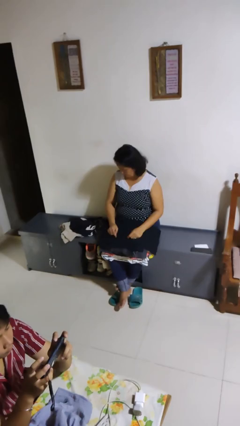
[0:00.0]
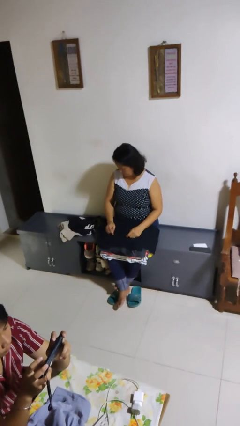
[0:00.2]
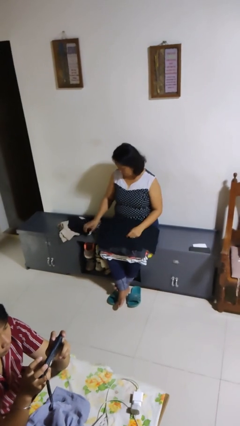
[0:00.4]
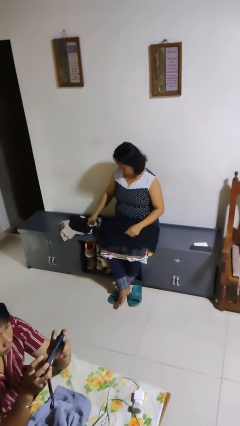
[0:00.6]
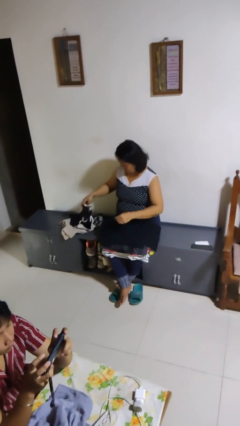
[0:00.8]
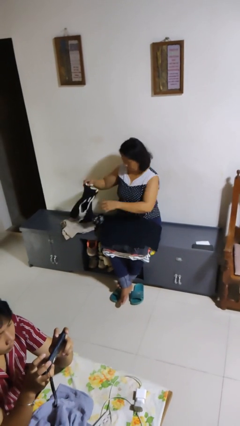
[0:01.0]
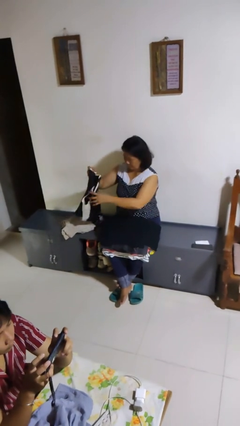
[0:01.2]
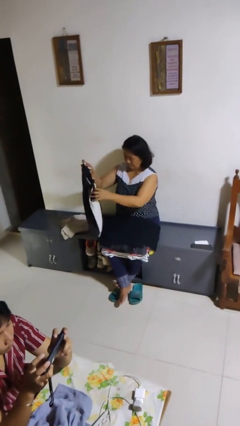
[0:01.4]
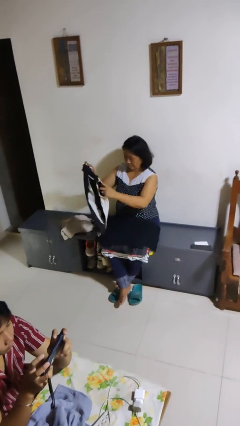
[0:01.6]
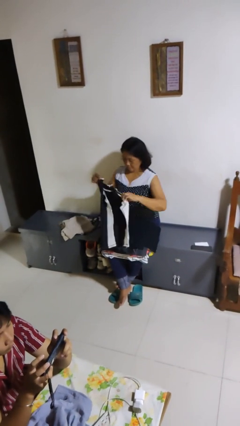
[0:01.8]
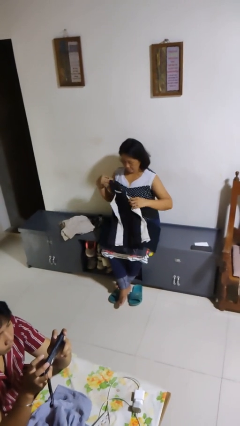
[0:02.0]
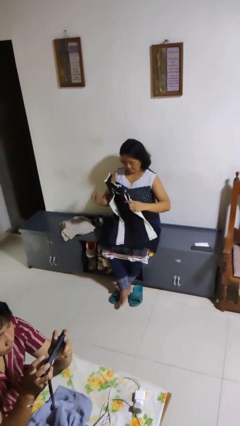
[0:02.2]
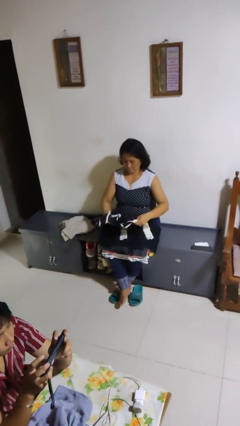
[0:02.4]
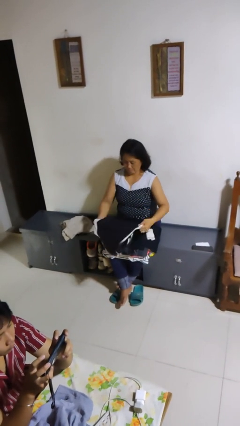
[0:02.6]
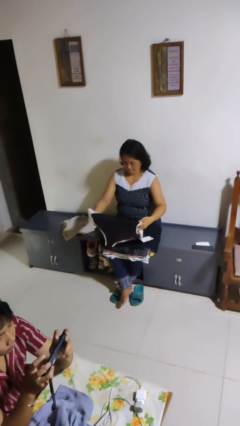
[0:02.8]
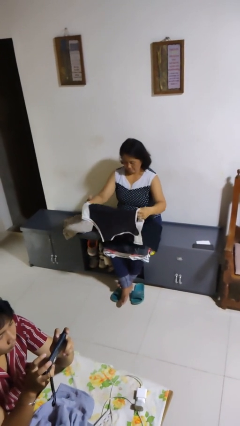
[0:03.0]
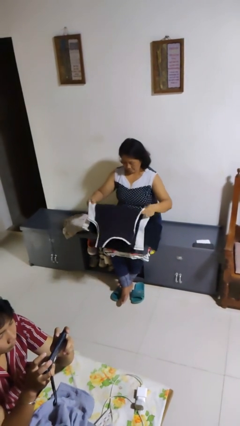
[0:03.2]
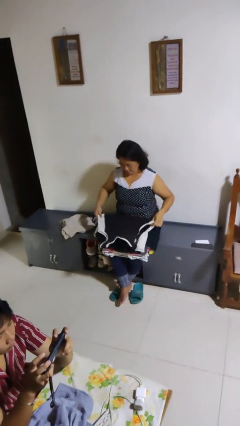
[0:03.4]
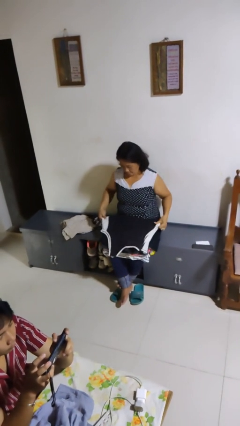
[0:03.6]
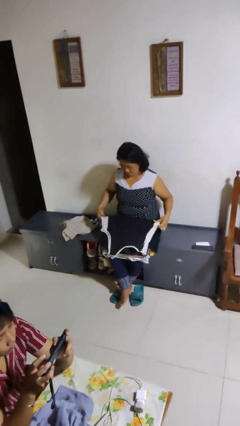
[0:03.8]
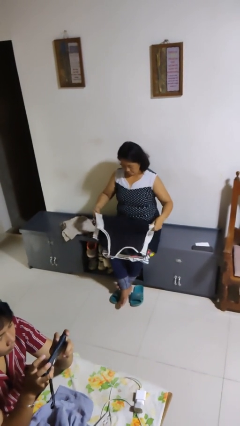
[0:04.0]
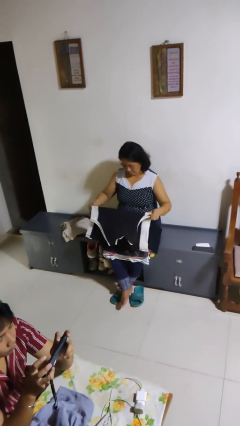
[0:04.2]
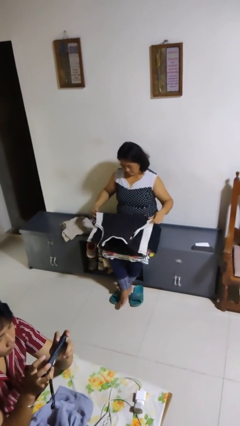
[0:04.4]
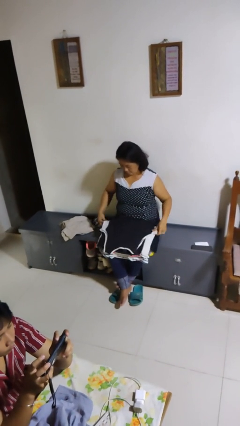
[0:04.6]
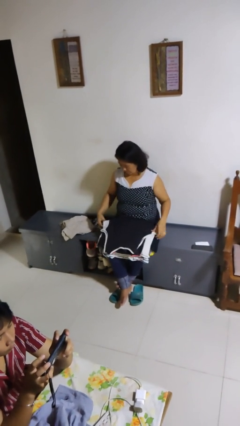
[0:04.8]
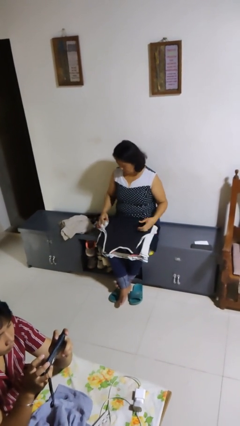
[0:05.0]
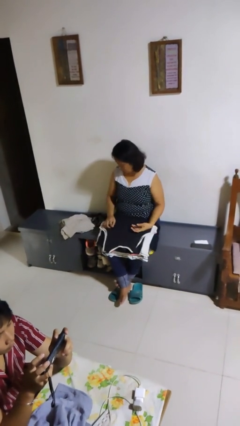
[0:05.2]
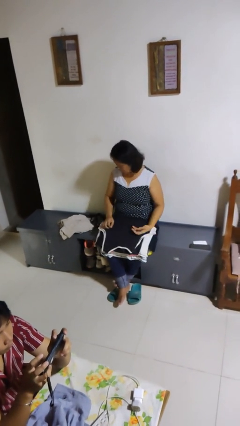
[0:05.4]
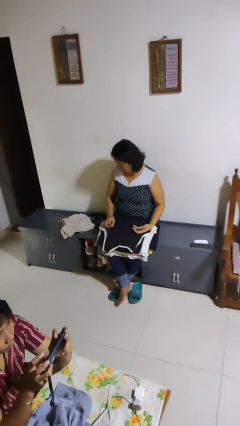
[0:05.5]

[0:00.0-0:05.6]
person folds shirt

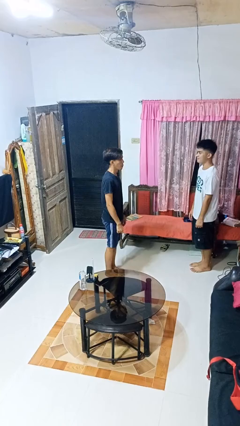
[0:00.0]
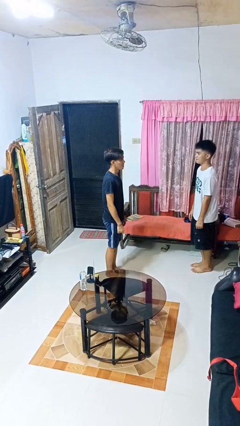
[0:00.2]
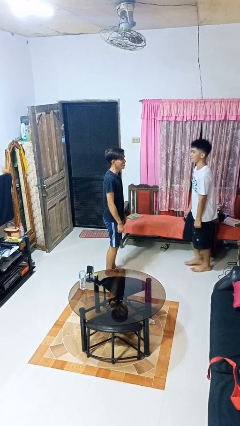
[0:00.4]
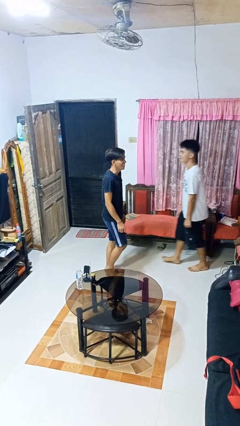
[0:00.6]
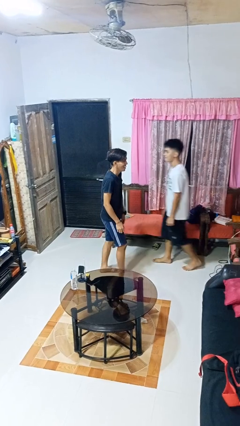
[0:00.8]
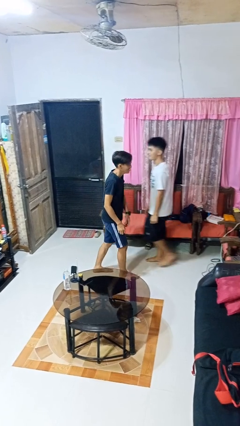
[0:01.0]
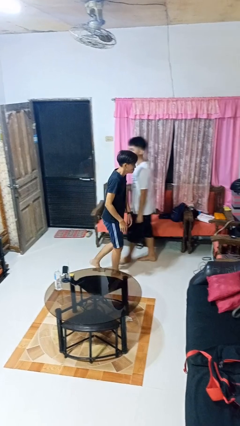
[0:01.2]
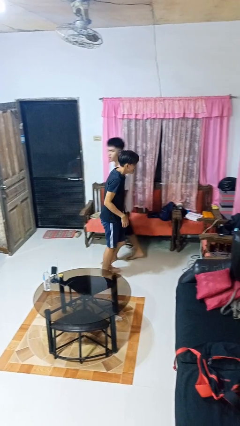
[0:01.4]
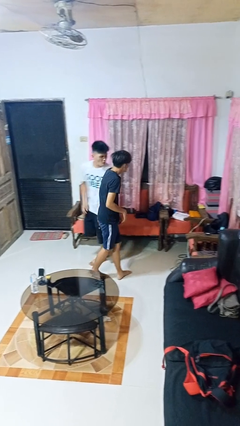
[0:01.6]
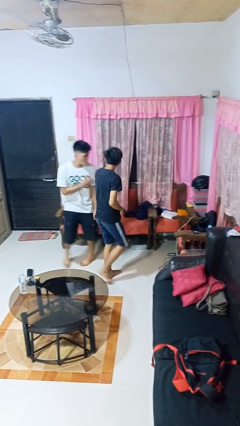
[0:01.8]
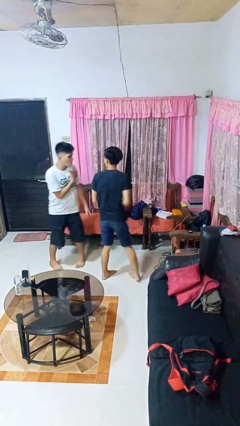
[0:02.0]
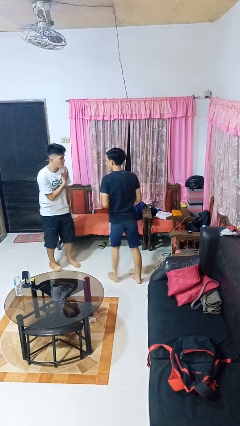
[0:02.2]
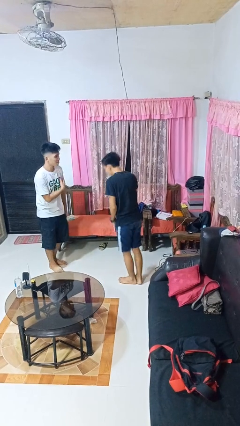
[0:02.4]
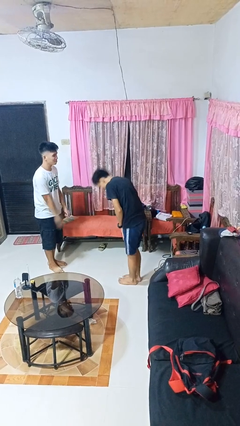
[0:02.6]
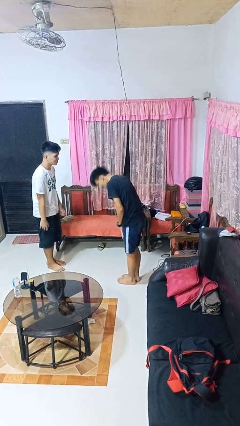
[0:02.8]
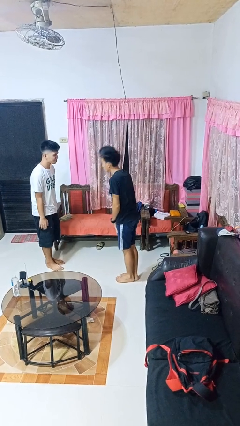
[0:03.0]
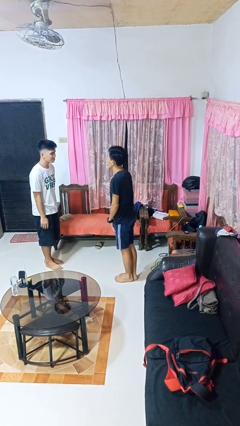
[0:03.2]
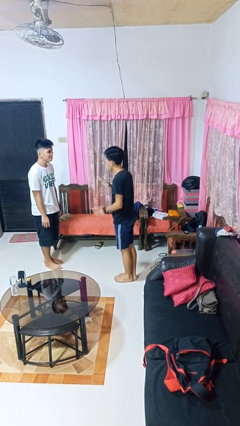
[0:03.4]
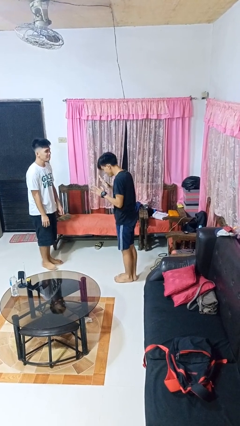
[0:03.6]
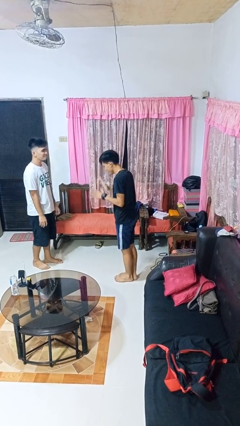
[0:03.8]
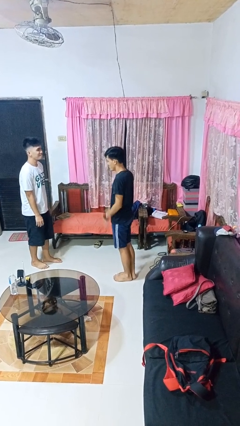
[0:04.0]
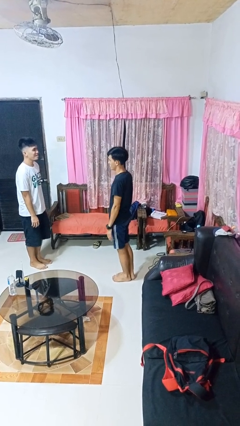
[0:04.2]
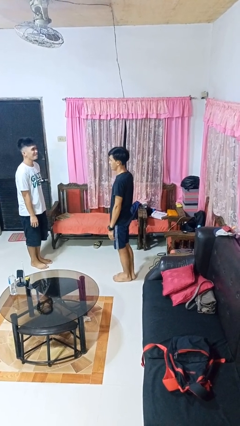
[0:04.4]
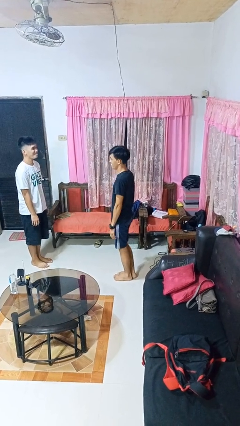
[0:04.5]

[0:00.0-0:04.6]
person bumps into person

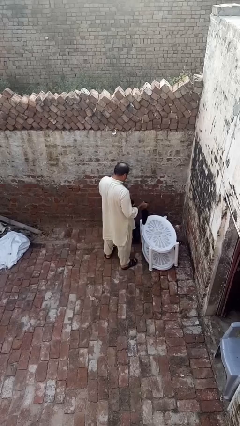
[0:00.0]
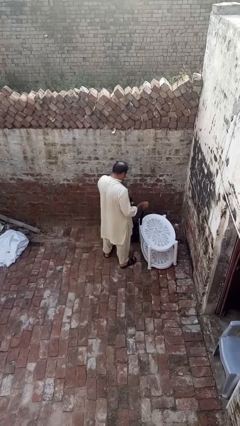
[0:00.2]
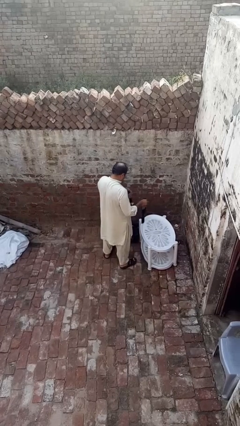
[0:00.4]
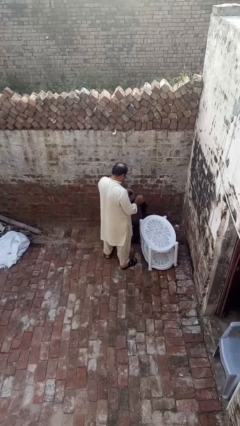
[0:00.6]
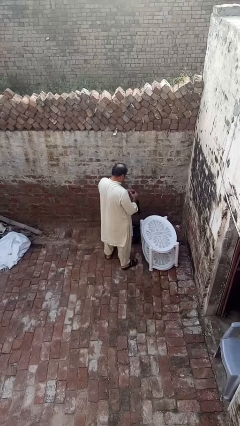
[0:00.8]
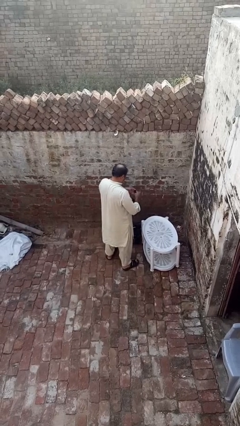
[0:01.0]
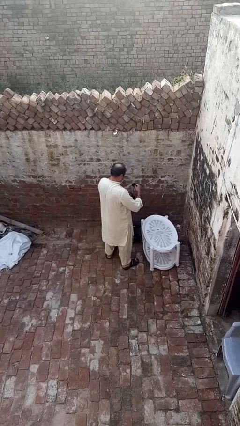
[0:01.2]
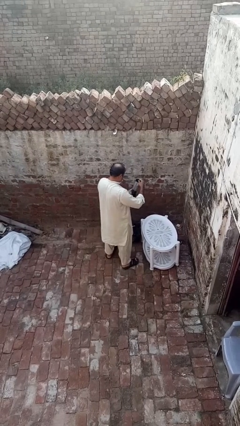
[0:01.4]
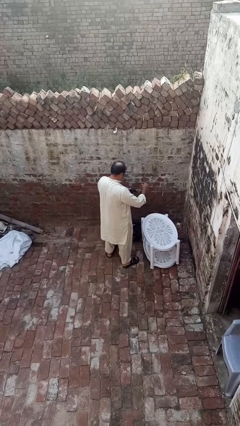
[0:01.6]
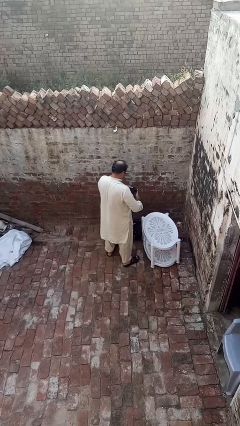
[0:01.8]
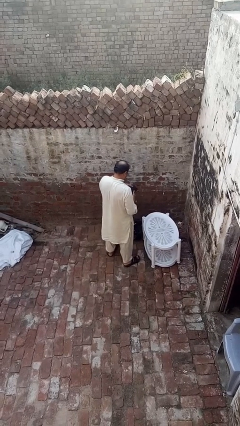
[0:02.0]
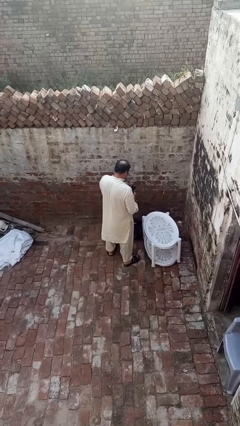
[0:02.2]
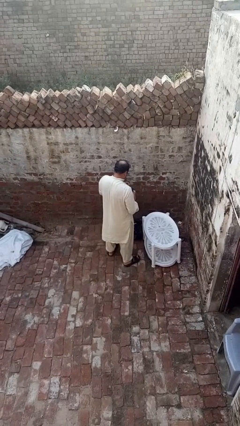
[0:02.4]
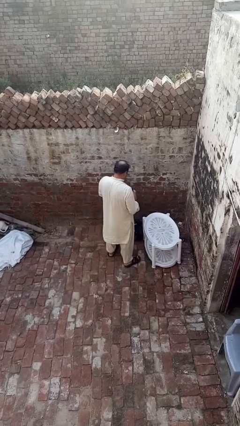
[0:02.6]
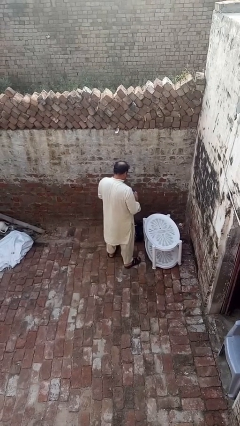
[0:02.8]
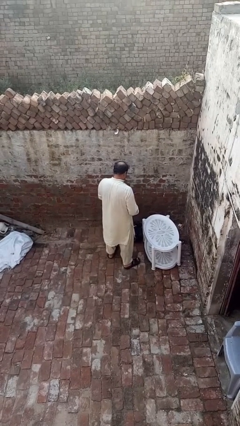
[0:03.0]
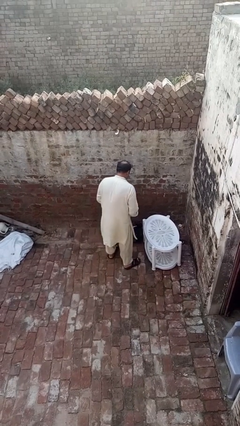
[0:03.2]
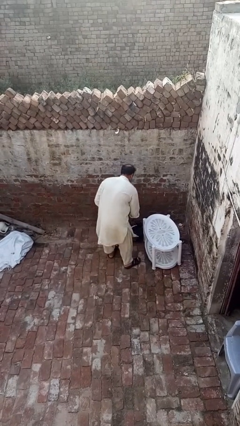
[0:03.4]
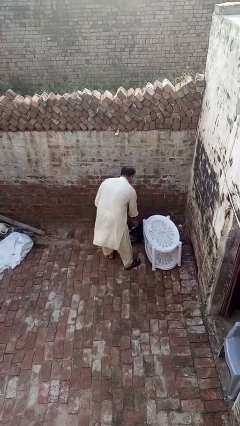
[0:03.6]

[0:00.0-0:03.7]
person folds socks

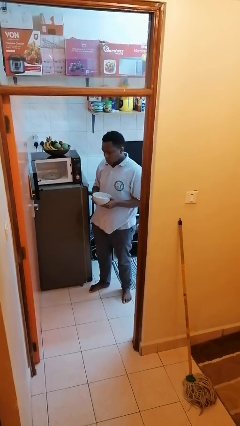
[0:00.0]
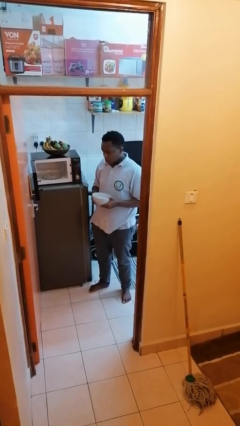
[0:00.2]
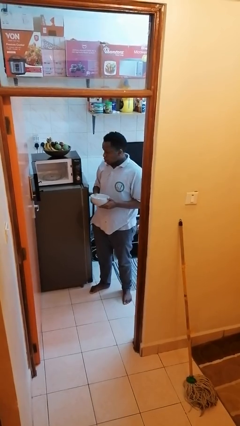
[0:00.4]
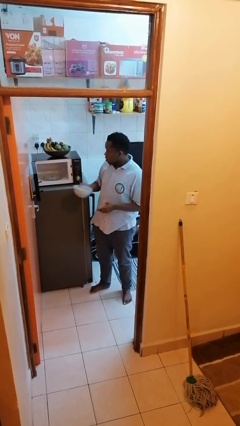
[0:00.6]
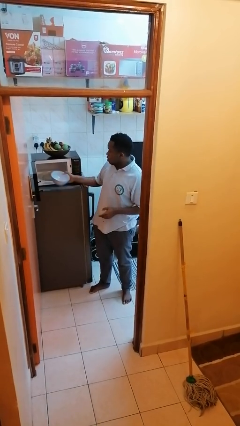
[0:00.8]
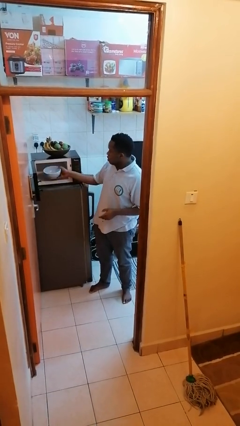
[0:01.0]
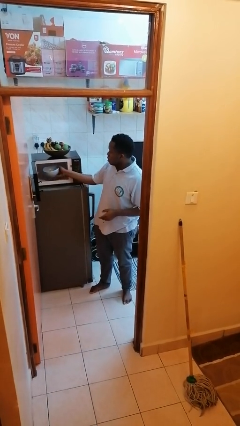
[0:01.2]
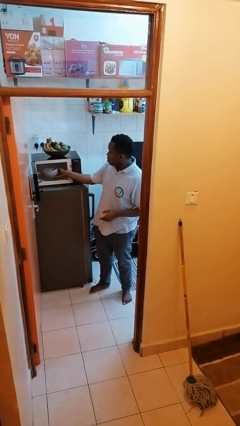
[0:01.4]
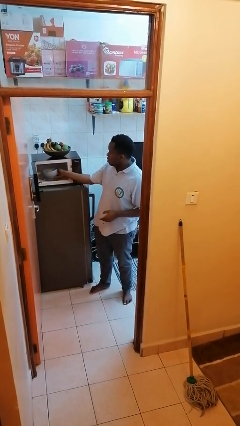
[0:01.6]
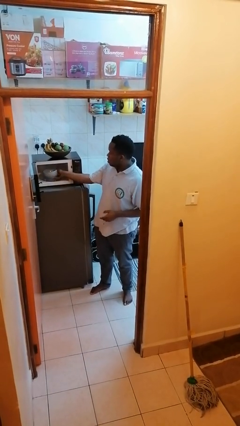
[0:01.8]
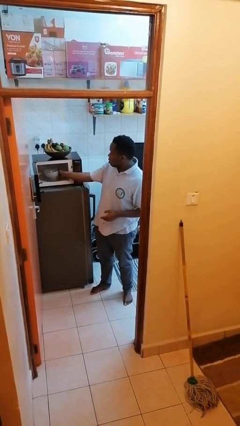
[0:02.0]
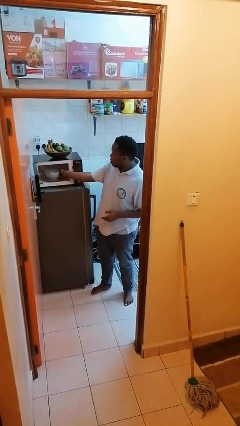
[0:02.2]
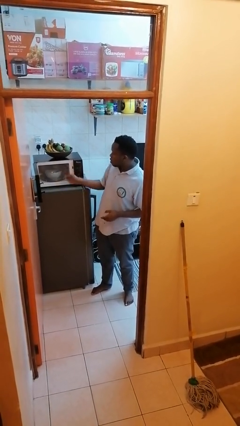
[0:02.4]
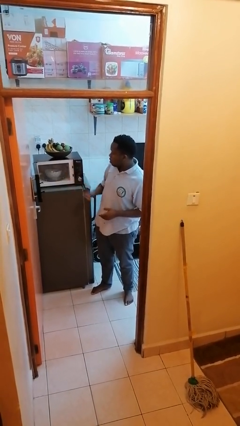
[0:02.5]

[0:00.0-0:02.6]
person puts object into microwave

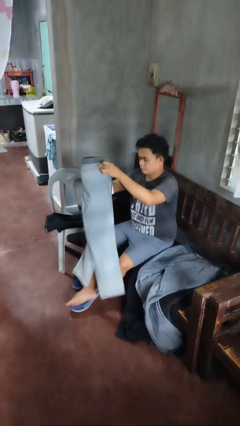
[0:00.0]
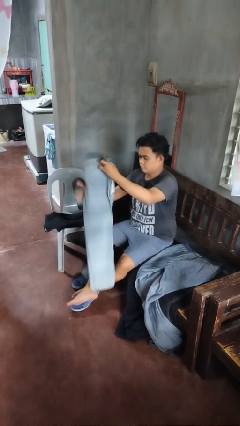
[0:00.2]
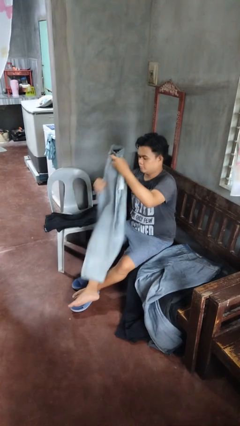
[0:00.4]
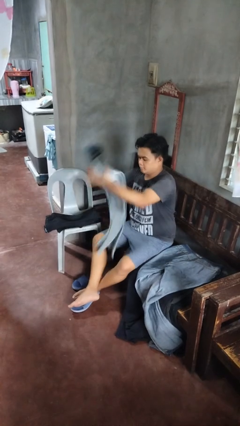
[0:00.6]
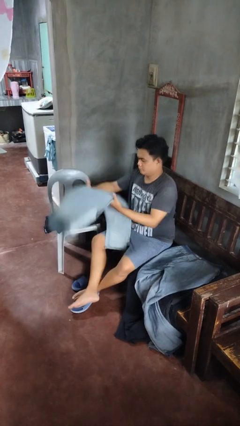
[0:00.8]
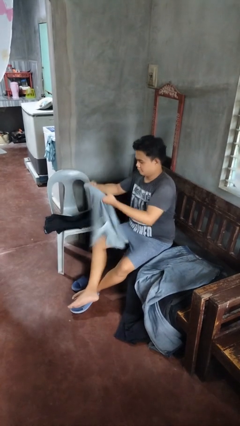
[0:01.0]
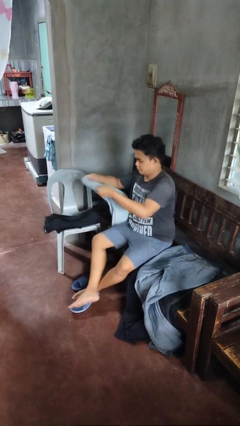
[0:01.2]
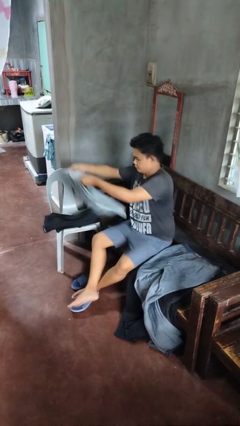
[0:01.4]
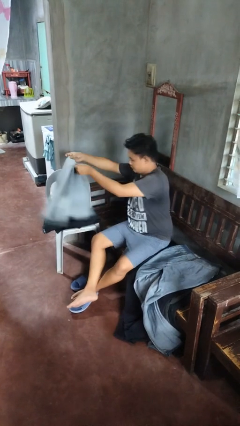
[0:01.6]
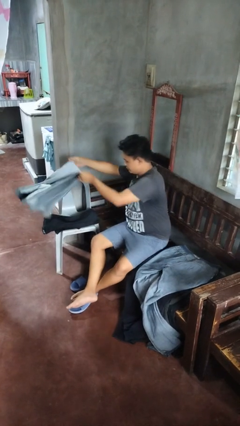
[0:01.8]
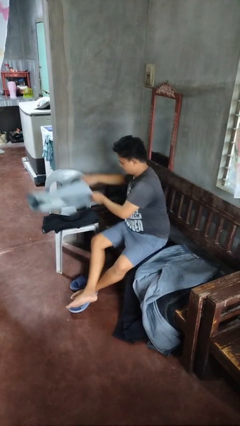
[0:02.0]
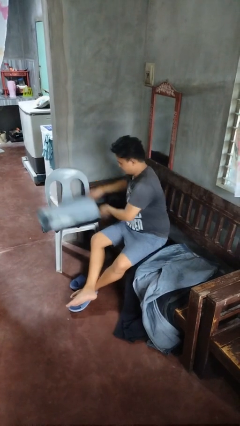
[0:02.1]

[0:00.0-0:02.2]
person folds pants
